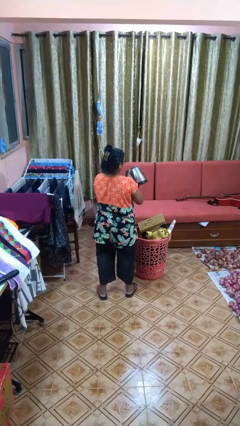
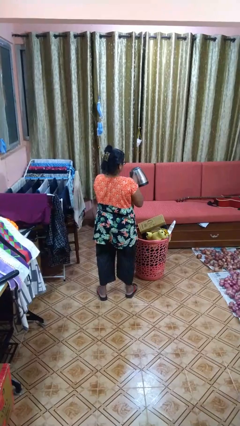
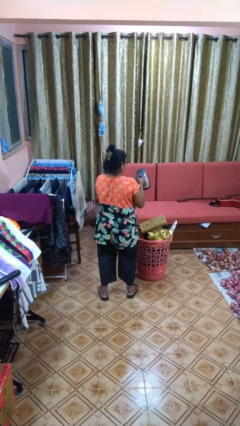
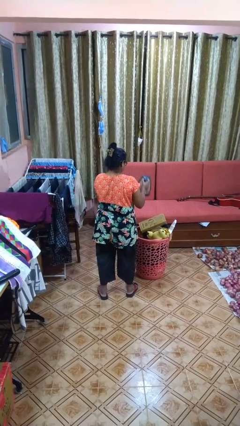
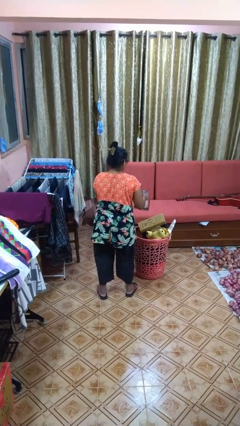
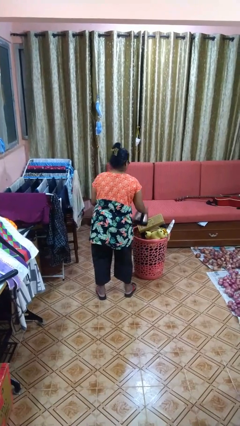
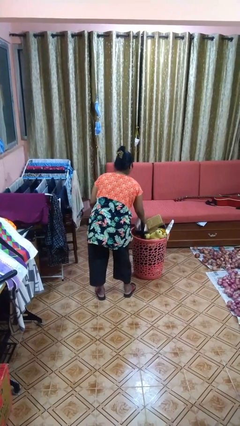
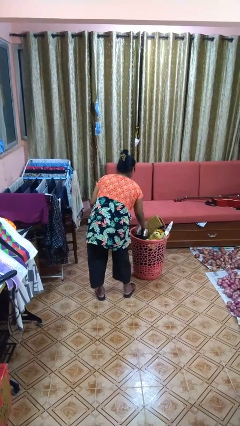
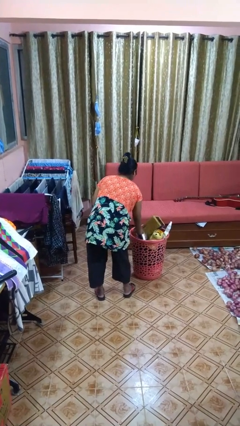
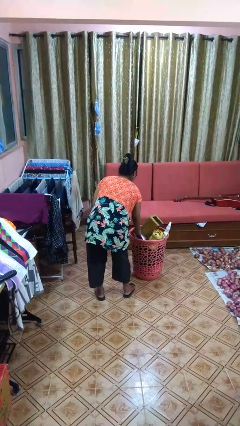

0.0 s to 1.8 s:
person puts object into basket

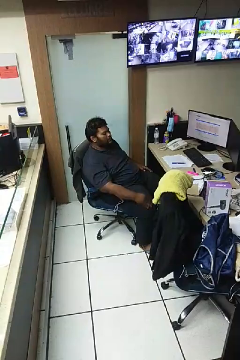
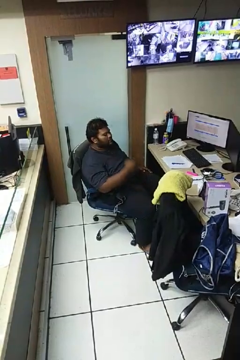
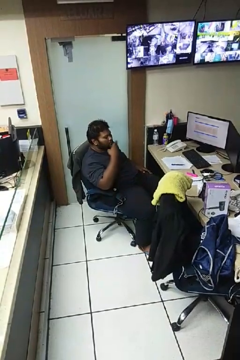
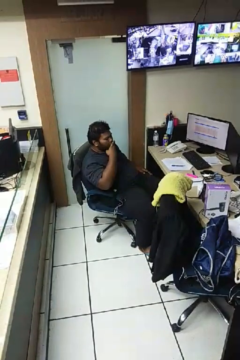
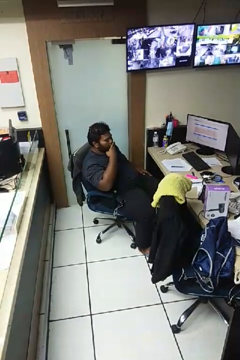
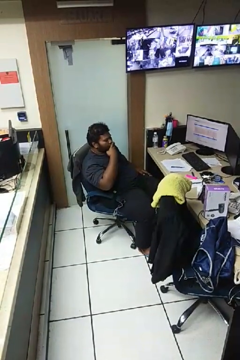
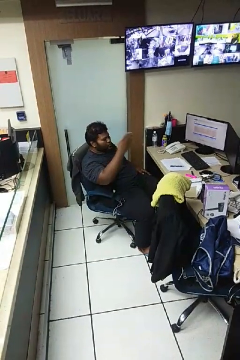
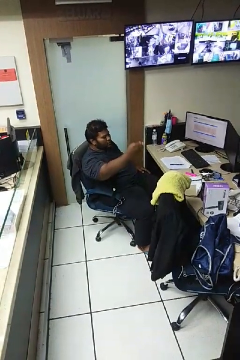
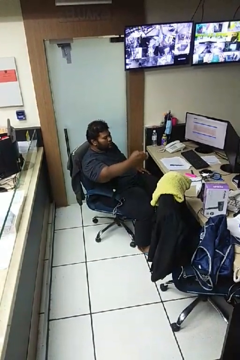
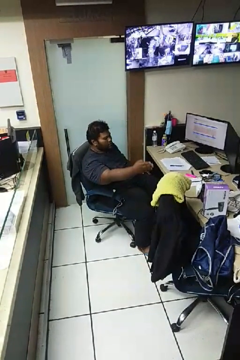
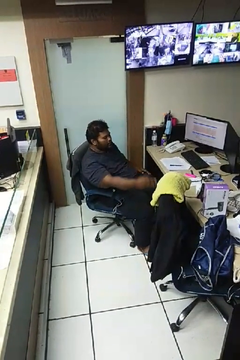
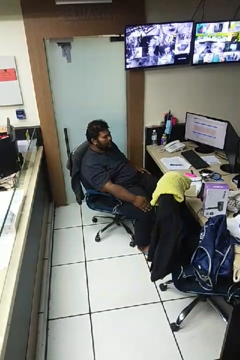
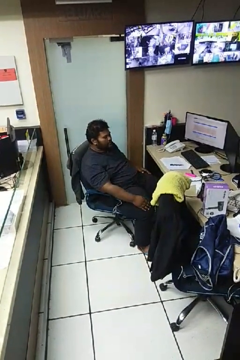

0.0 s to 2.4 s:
person gestures blow kiss

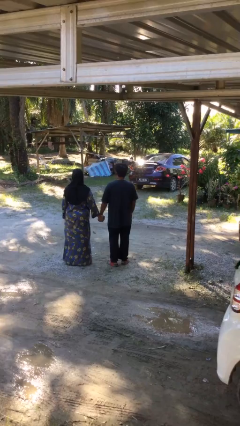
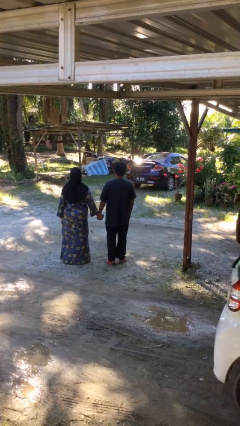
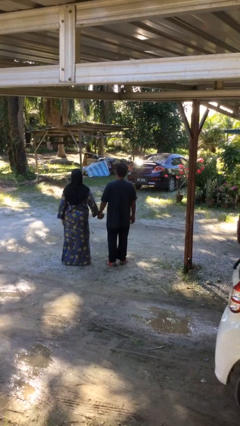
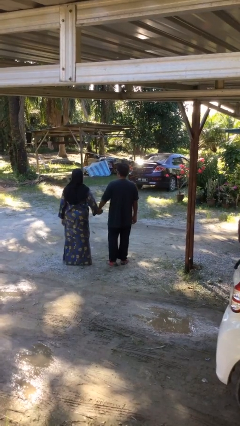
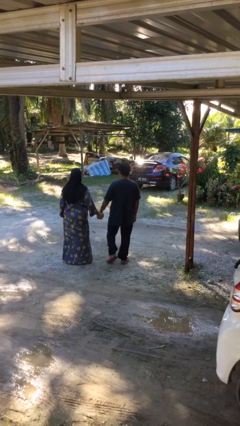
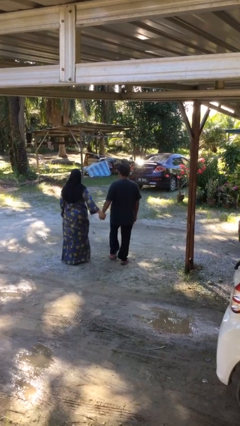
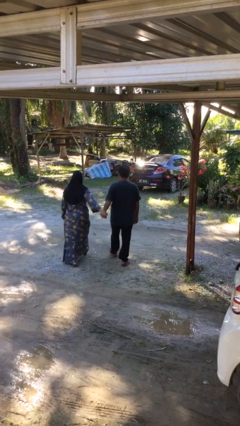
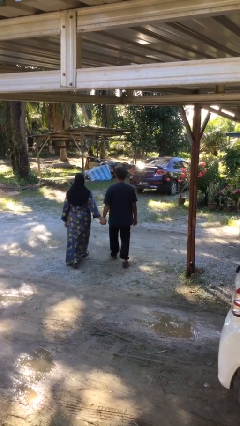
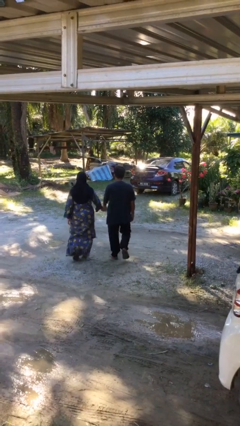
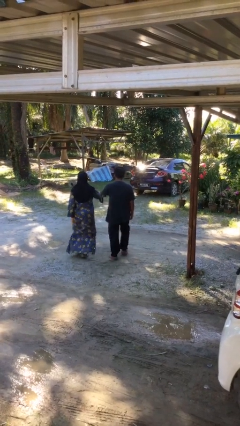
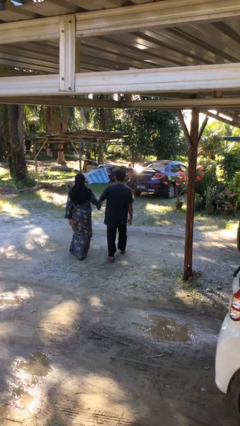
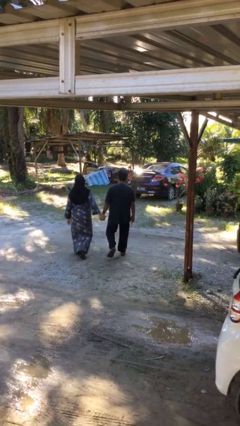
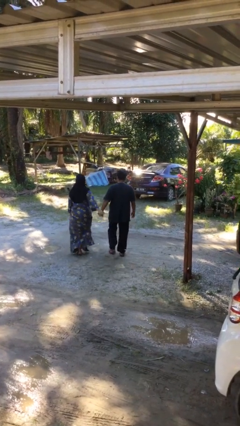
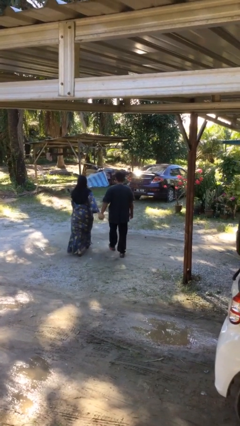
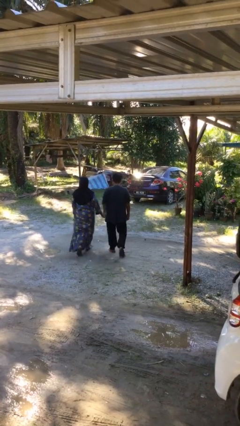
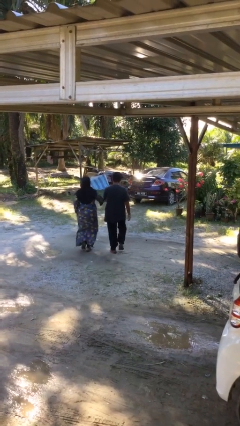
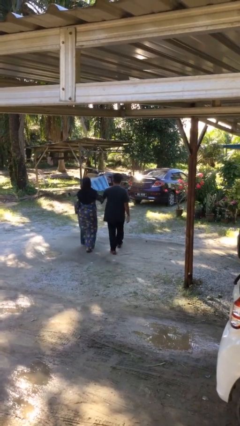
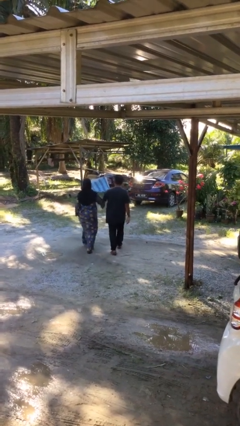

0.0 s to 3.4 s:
person holds hand

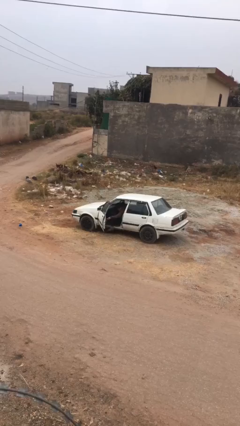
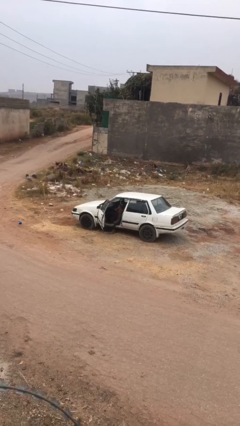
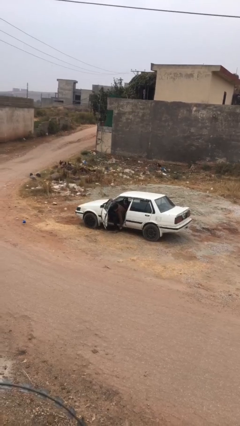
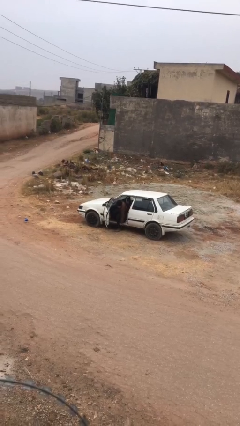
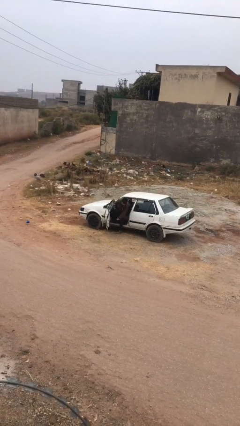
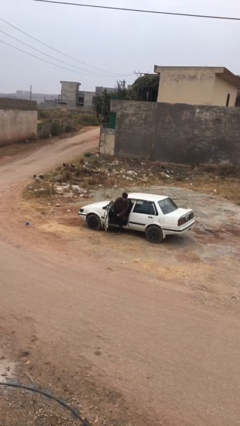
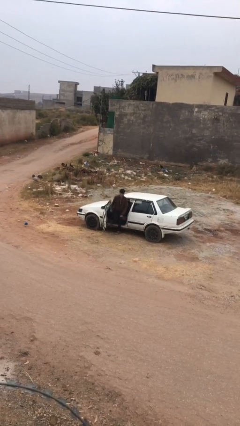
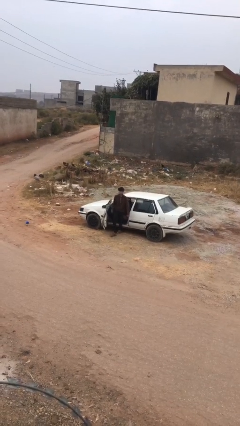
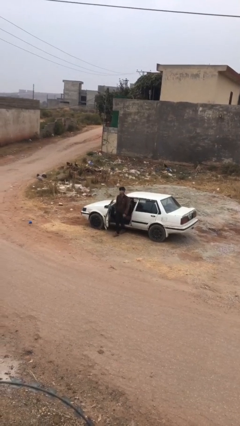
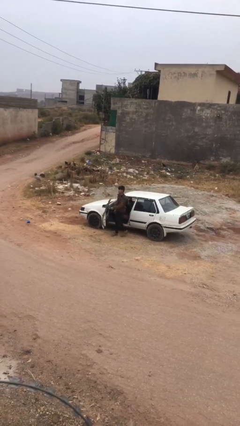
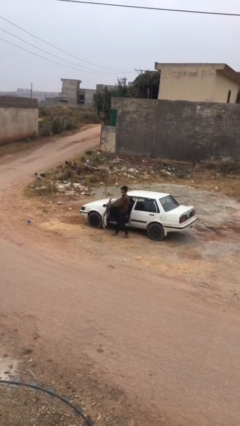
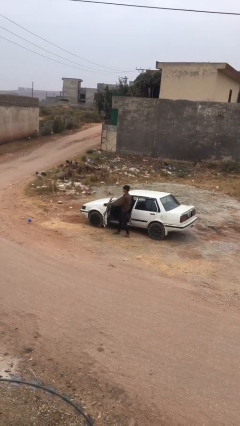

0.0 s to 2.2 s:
person exits car

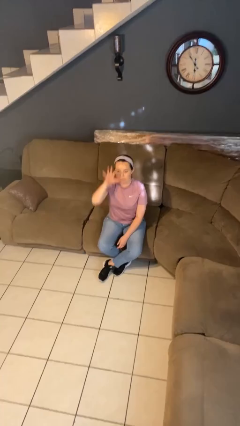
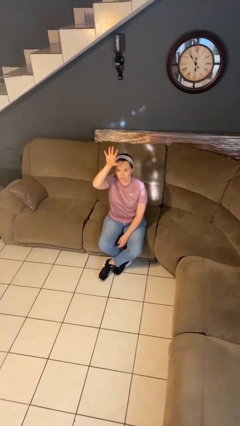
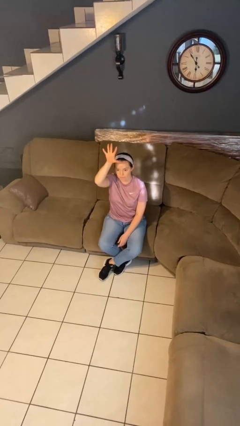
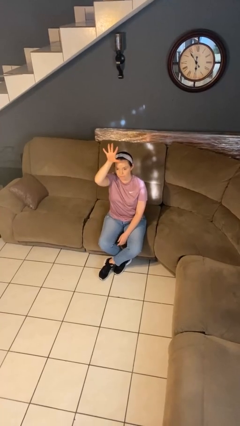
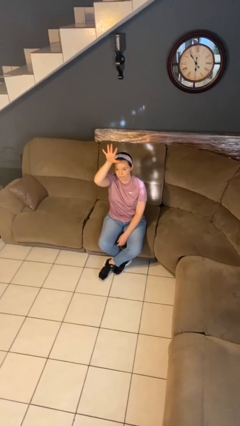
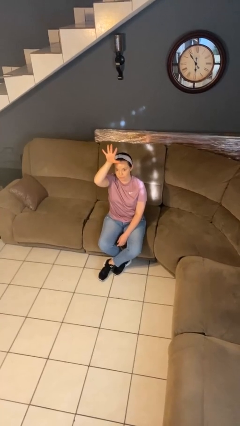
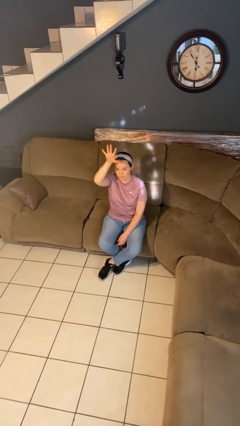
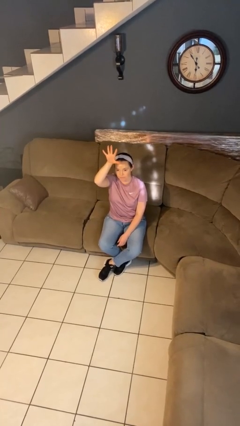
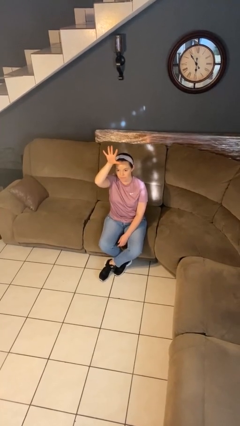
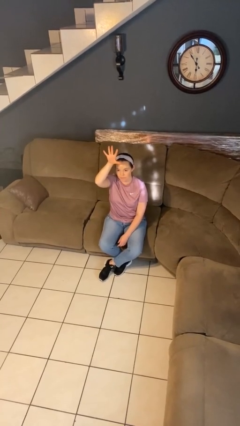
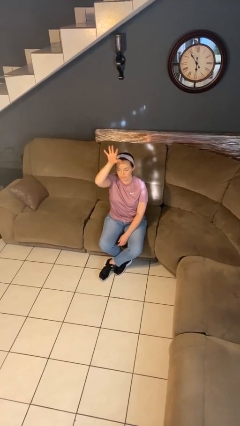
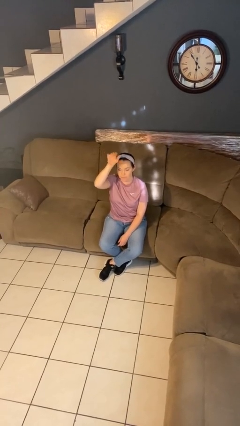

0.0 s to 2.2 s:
person gestures number five

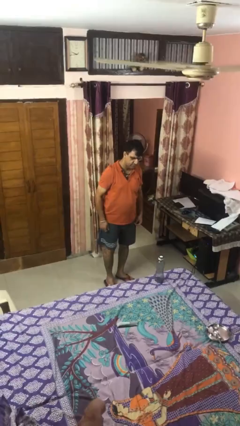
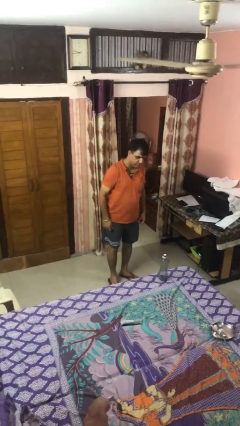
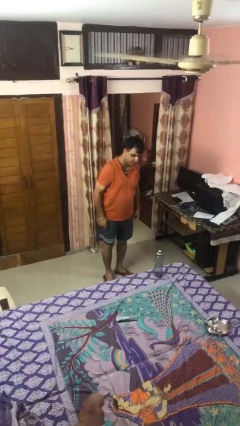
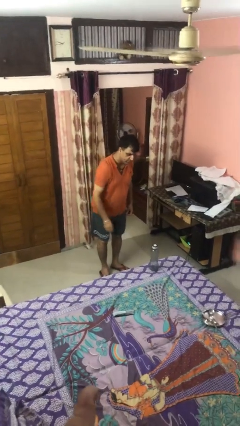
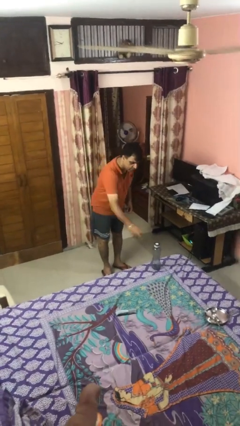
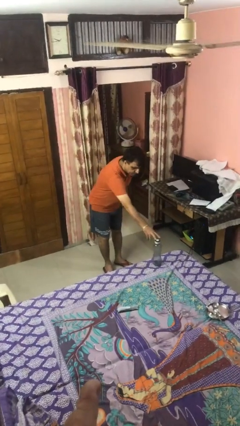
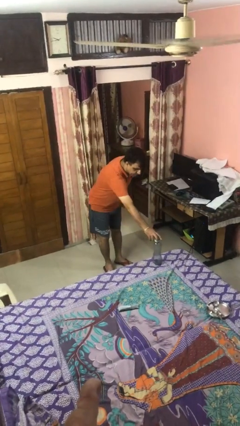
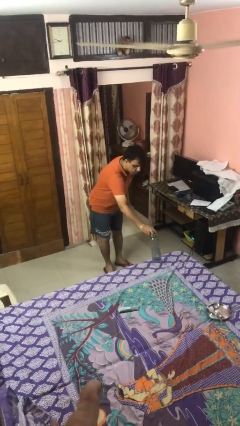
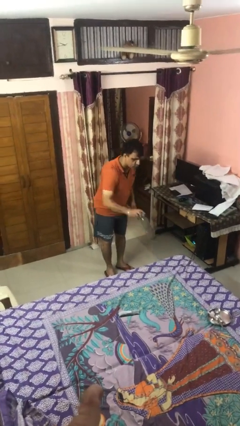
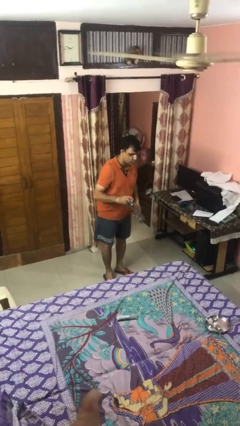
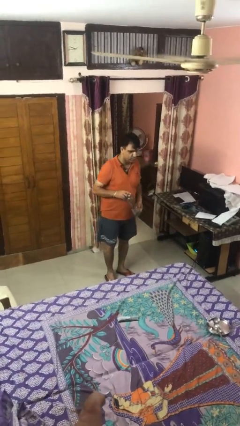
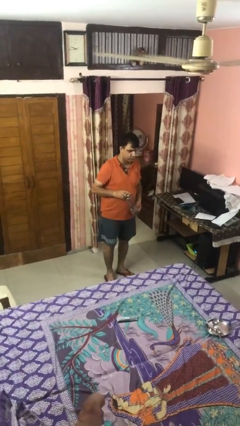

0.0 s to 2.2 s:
person picks up object from bed

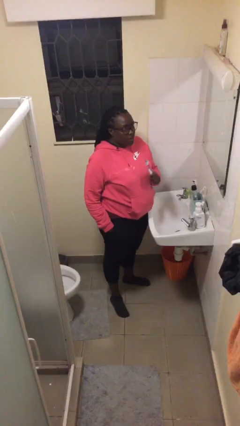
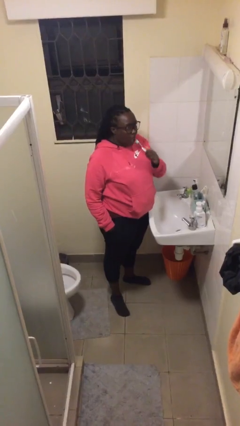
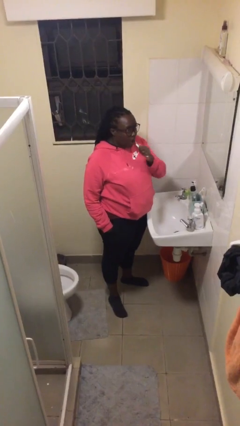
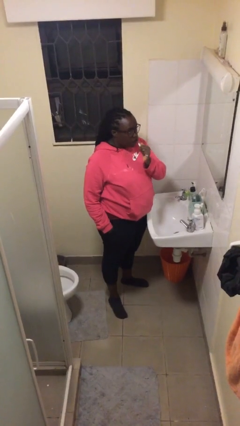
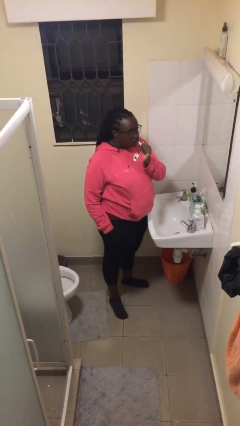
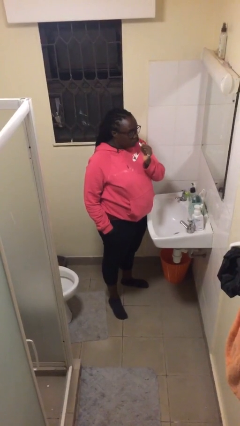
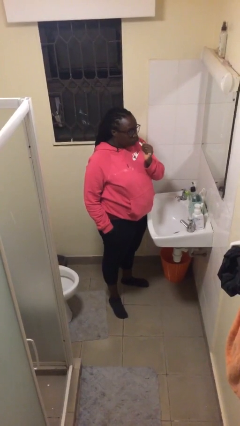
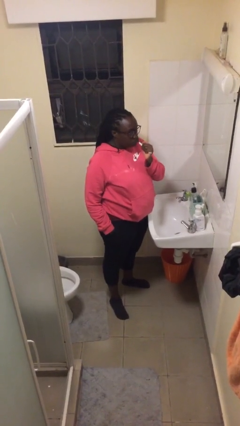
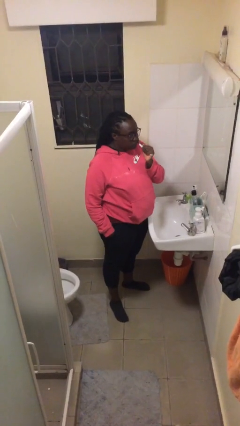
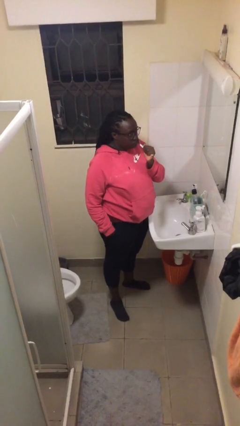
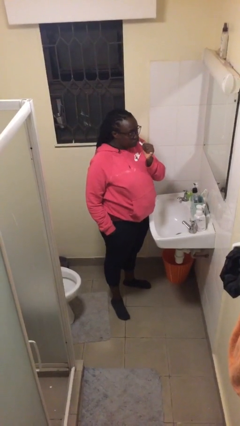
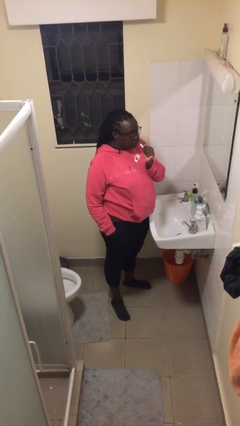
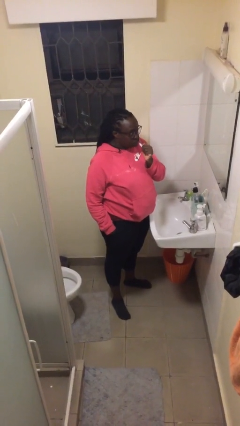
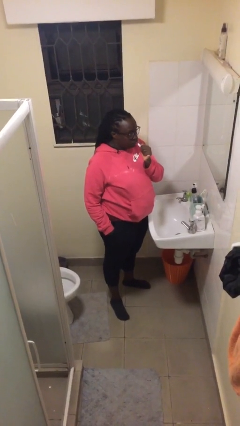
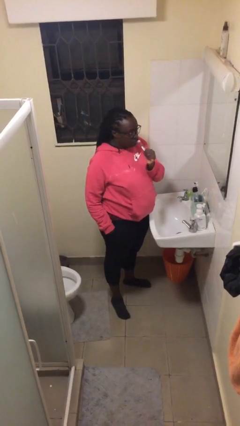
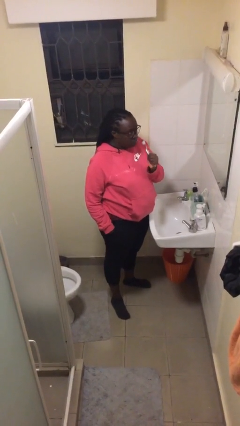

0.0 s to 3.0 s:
person brushes teeth
